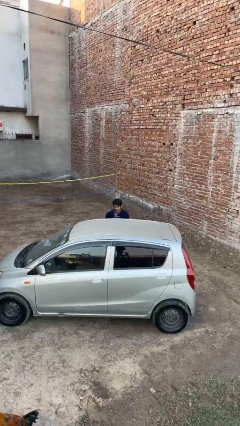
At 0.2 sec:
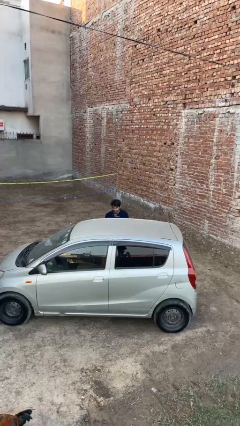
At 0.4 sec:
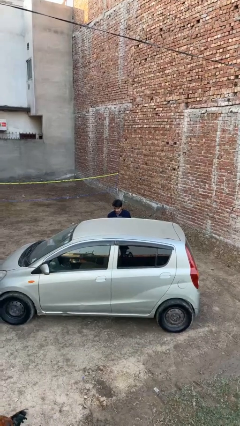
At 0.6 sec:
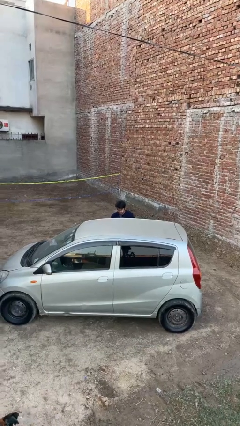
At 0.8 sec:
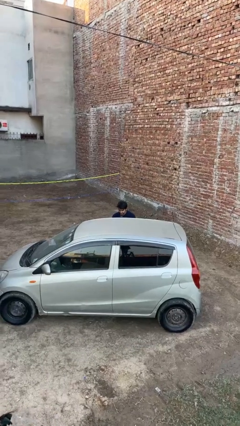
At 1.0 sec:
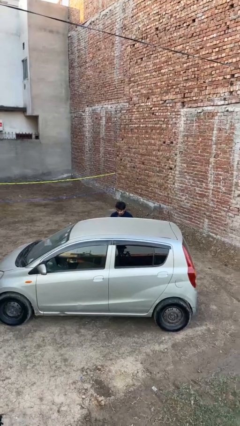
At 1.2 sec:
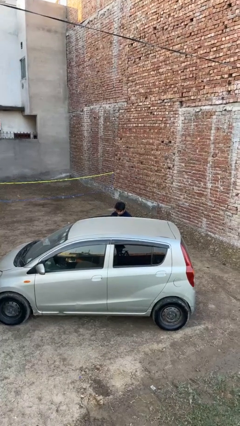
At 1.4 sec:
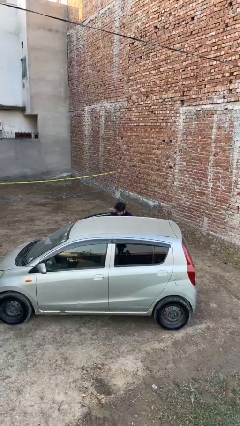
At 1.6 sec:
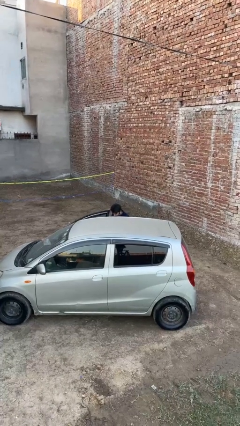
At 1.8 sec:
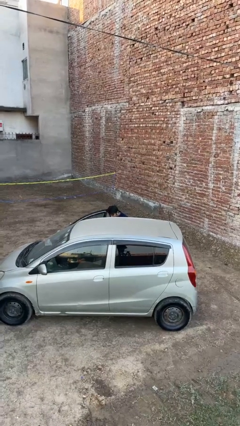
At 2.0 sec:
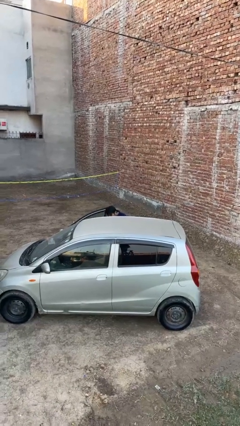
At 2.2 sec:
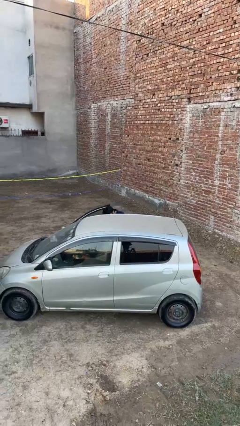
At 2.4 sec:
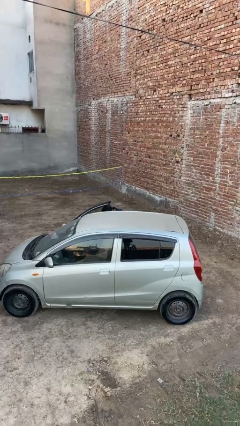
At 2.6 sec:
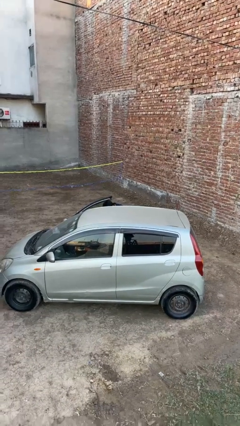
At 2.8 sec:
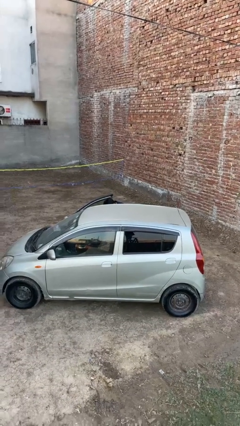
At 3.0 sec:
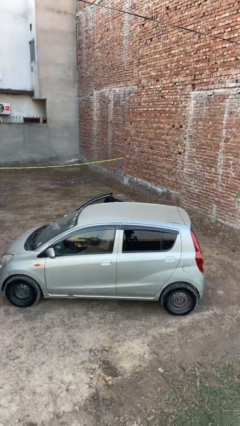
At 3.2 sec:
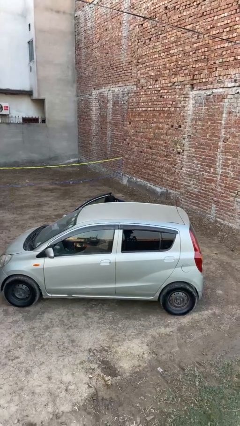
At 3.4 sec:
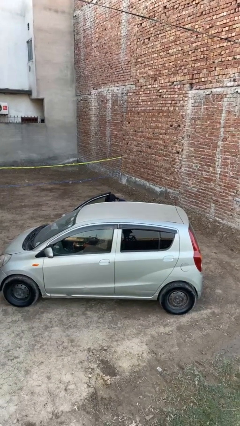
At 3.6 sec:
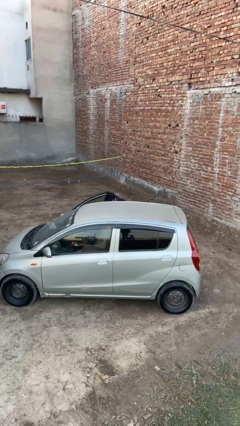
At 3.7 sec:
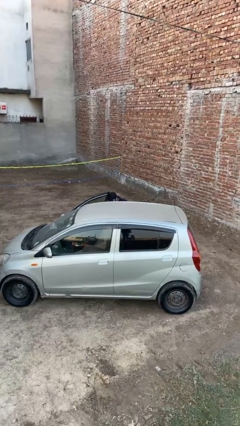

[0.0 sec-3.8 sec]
person opens car door

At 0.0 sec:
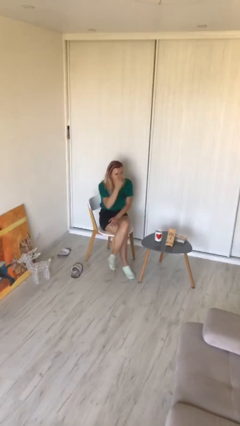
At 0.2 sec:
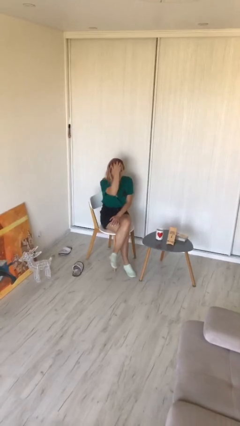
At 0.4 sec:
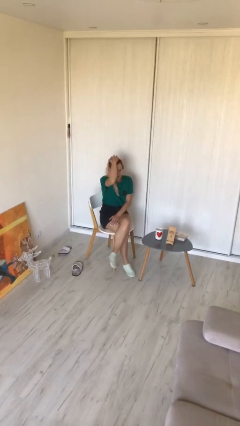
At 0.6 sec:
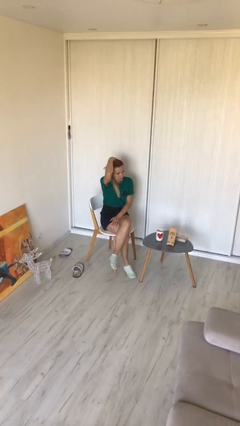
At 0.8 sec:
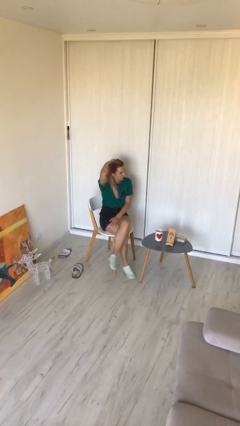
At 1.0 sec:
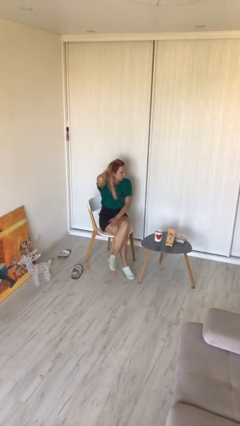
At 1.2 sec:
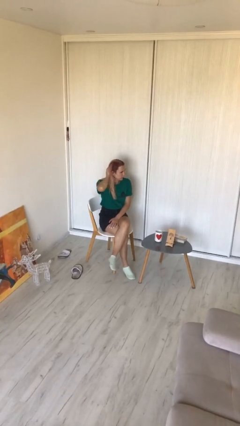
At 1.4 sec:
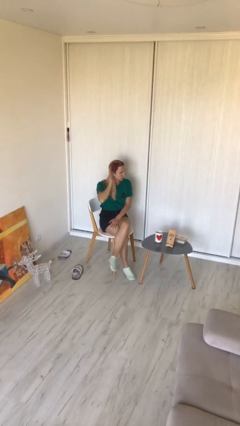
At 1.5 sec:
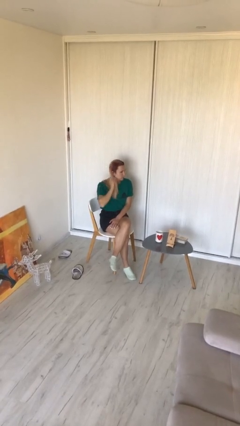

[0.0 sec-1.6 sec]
person strokes hair

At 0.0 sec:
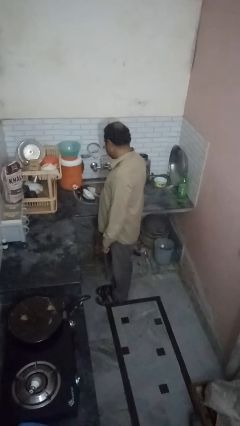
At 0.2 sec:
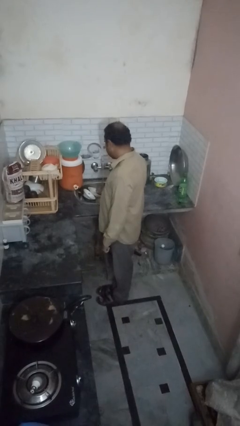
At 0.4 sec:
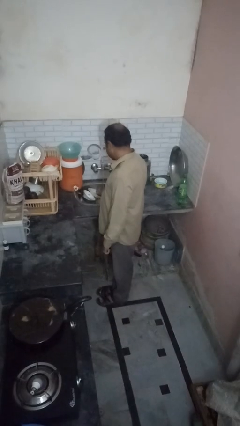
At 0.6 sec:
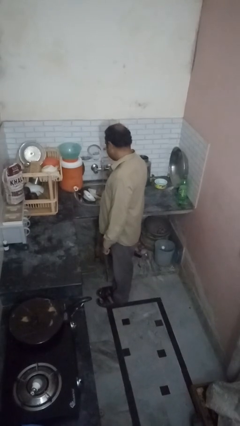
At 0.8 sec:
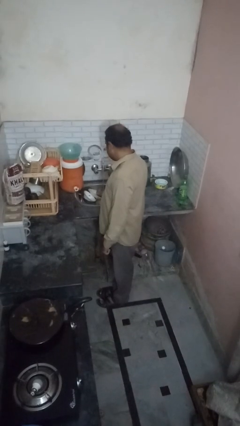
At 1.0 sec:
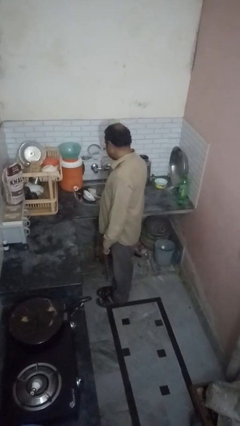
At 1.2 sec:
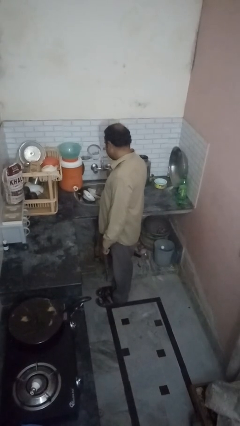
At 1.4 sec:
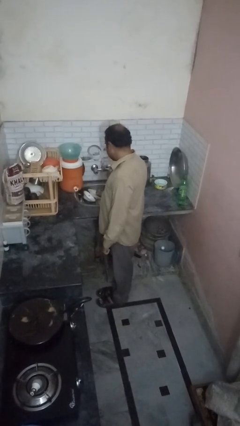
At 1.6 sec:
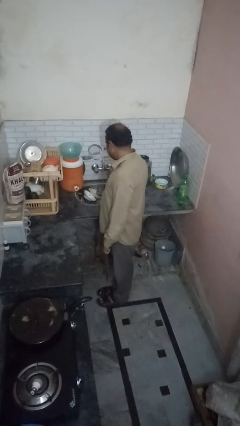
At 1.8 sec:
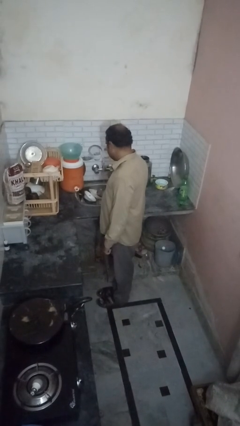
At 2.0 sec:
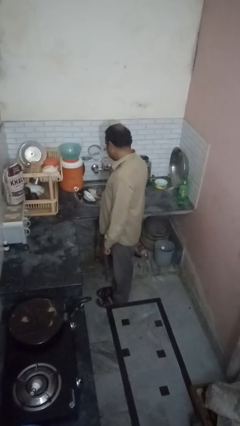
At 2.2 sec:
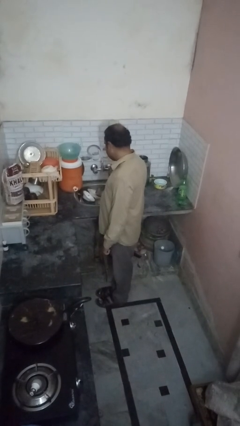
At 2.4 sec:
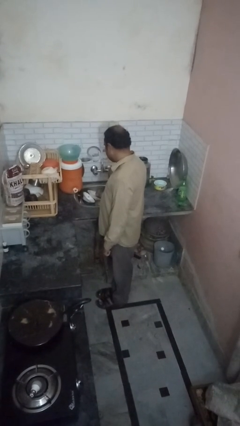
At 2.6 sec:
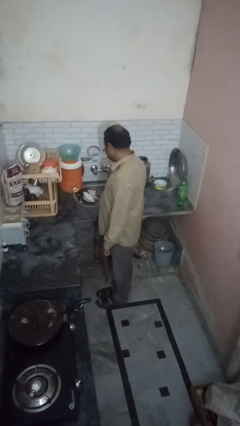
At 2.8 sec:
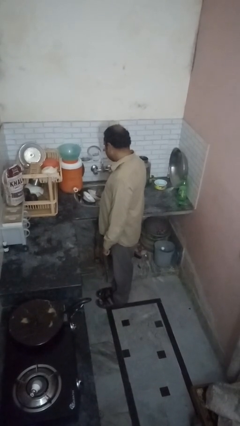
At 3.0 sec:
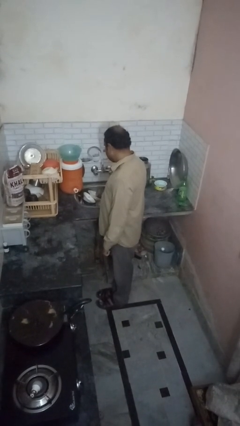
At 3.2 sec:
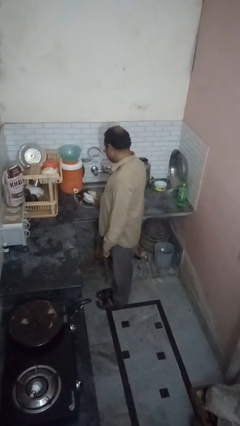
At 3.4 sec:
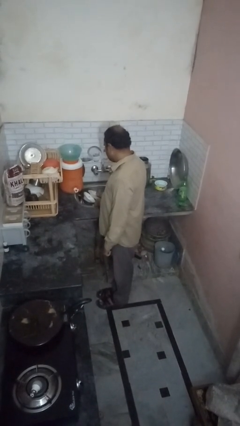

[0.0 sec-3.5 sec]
person closes dishwasher

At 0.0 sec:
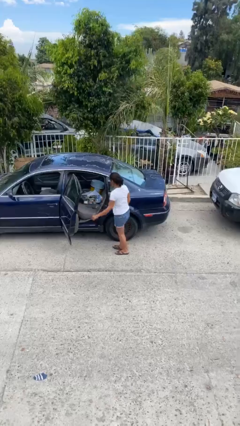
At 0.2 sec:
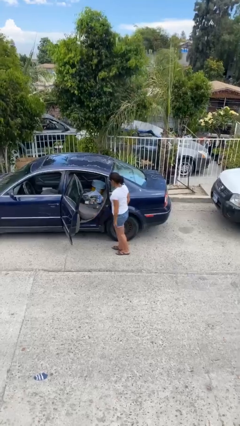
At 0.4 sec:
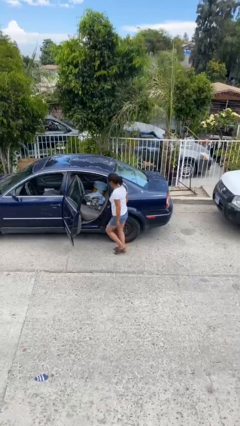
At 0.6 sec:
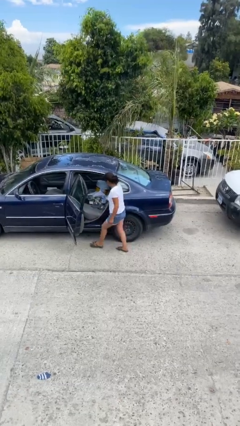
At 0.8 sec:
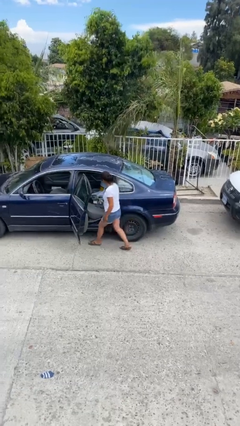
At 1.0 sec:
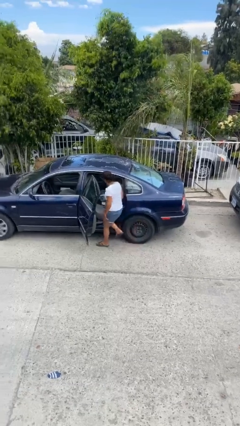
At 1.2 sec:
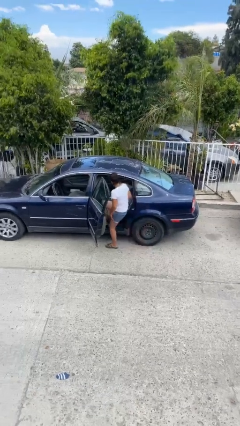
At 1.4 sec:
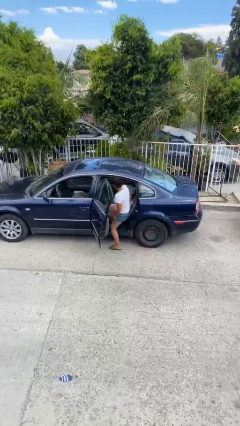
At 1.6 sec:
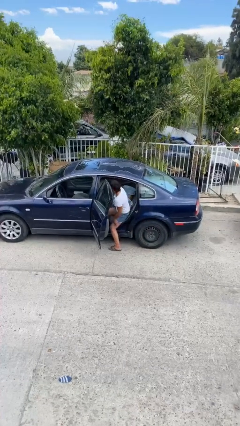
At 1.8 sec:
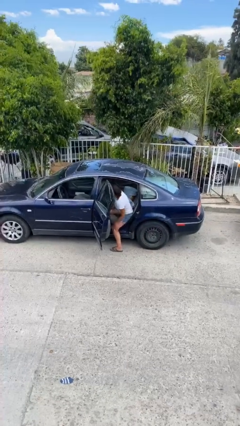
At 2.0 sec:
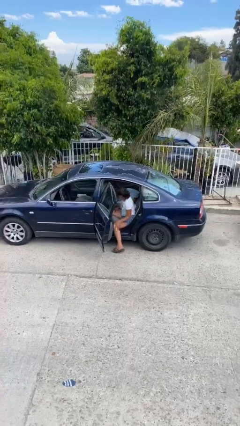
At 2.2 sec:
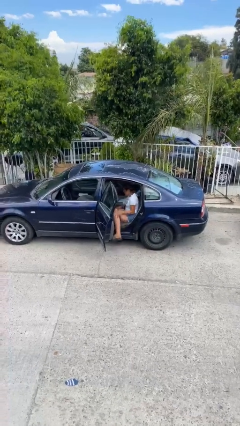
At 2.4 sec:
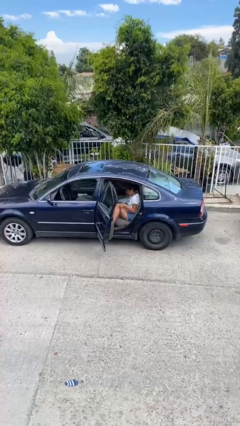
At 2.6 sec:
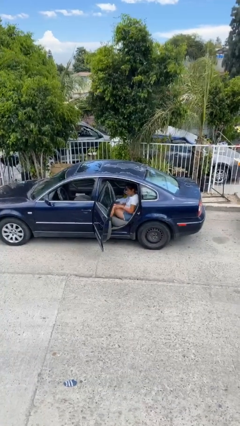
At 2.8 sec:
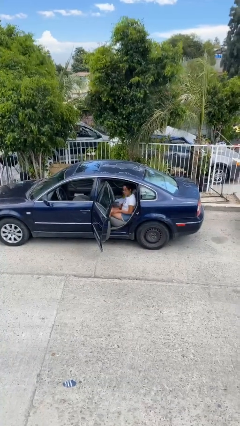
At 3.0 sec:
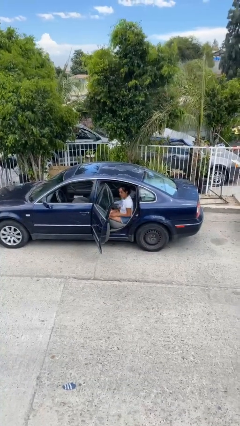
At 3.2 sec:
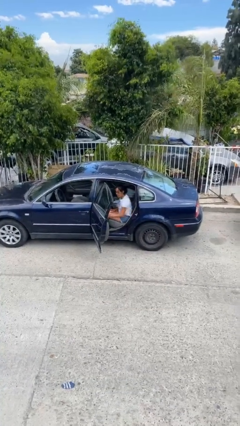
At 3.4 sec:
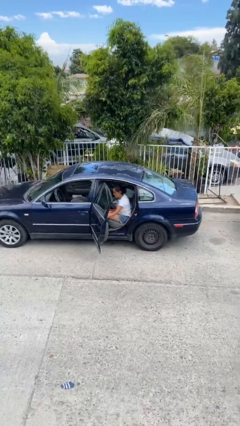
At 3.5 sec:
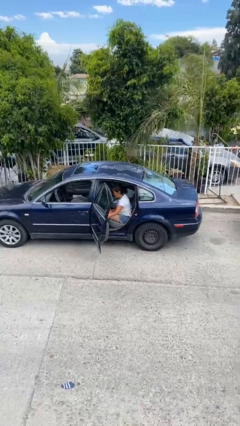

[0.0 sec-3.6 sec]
person enters car

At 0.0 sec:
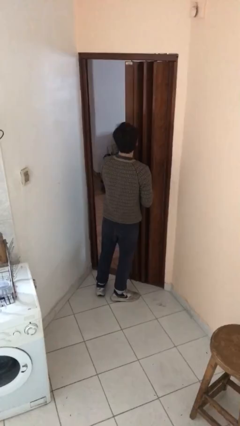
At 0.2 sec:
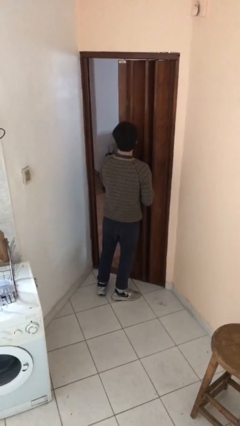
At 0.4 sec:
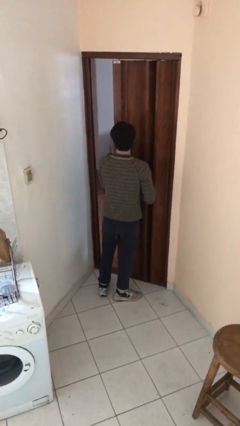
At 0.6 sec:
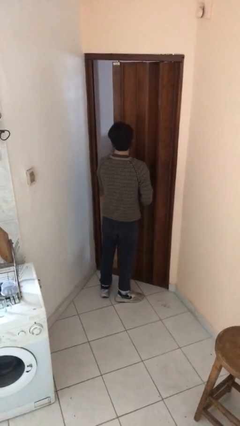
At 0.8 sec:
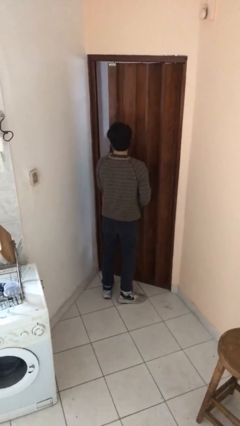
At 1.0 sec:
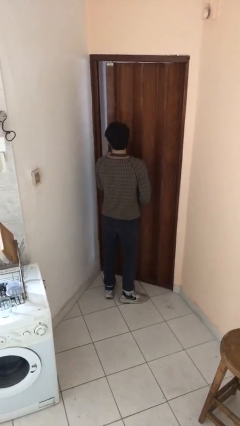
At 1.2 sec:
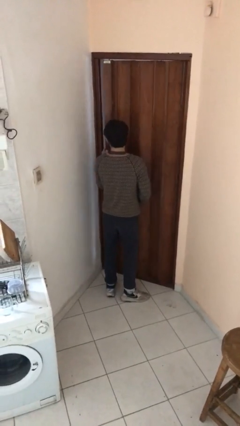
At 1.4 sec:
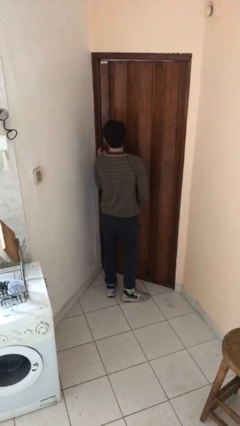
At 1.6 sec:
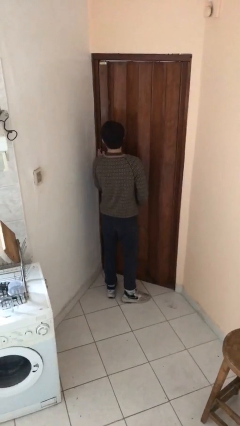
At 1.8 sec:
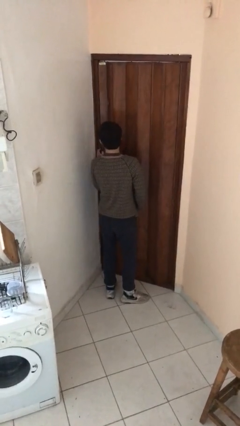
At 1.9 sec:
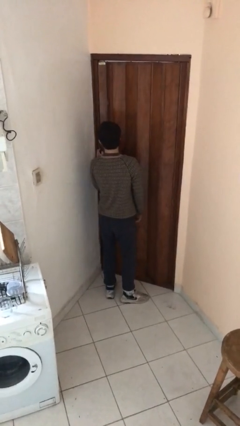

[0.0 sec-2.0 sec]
person closes sliding door

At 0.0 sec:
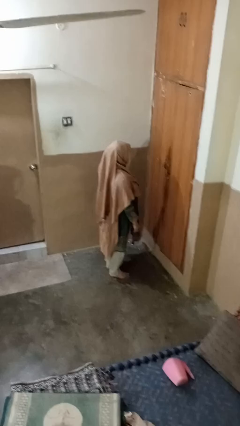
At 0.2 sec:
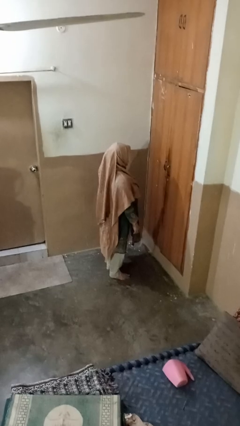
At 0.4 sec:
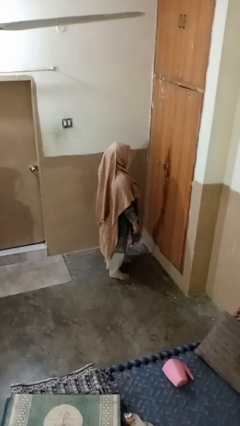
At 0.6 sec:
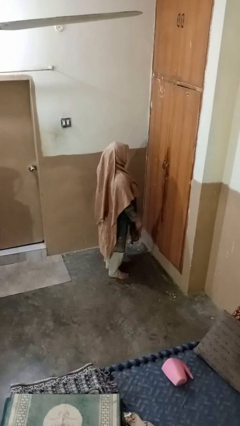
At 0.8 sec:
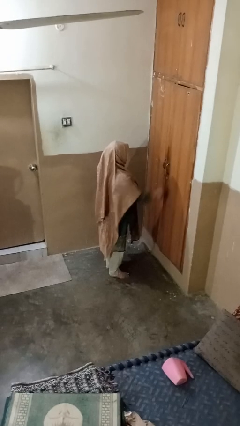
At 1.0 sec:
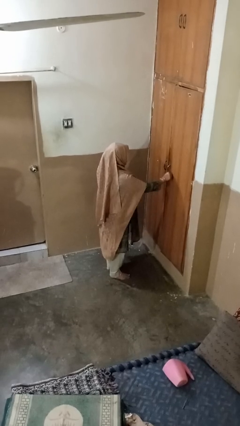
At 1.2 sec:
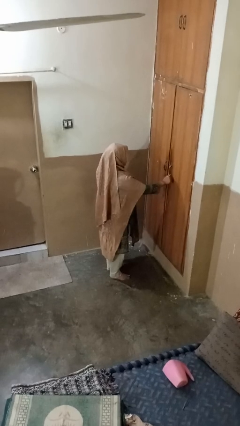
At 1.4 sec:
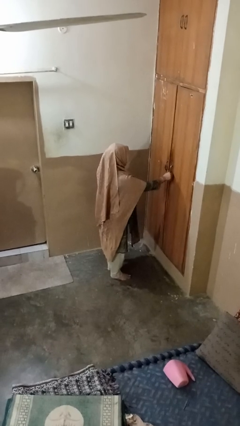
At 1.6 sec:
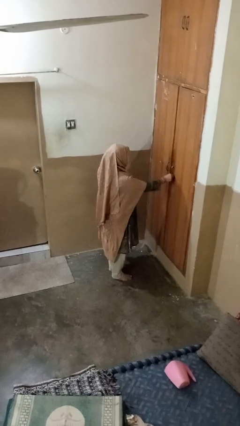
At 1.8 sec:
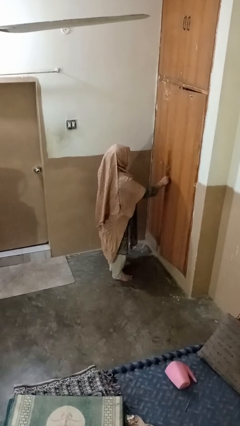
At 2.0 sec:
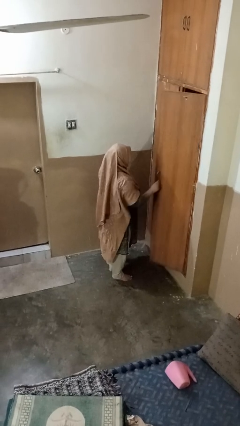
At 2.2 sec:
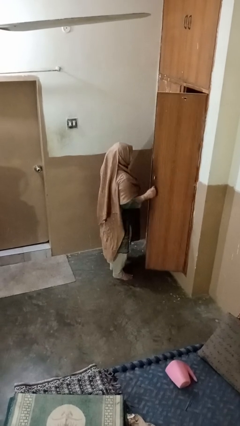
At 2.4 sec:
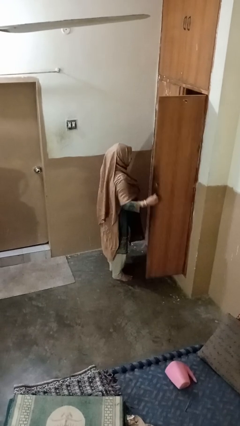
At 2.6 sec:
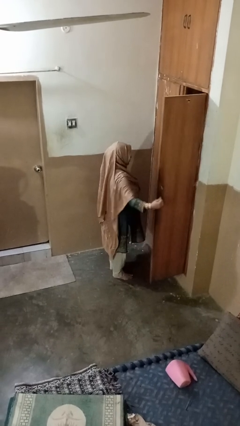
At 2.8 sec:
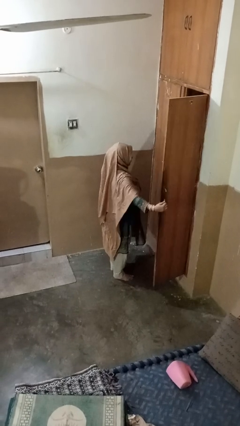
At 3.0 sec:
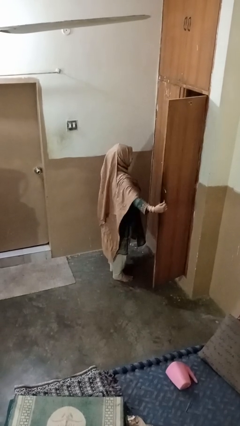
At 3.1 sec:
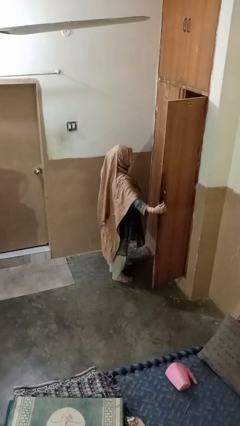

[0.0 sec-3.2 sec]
person opens closet door
